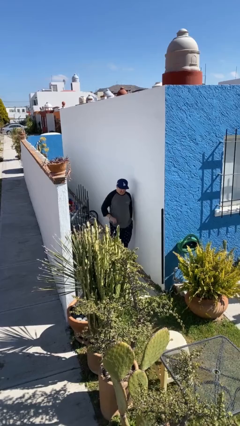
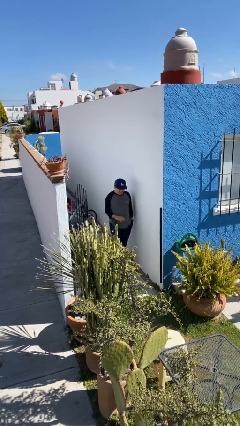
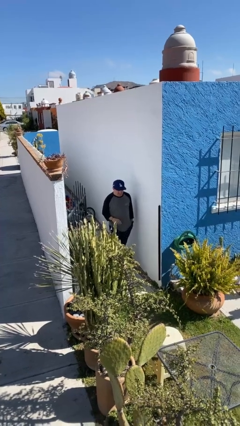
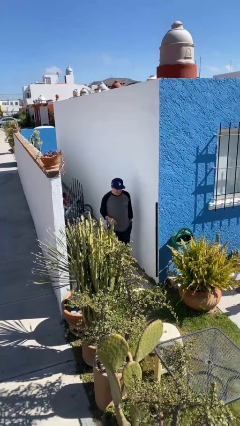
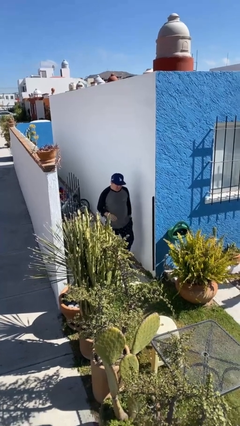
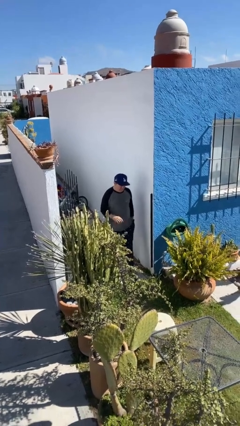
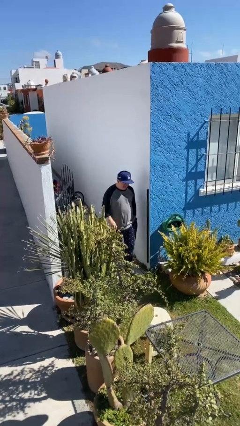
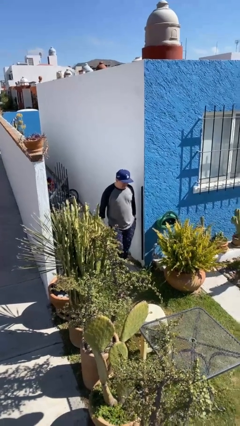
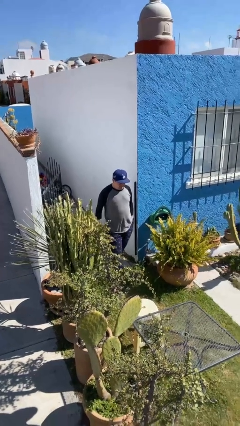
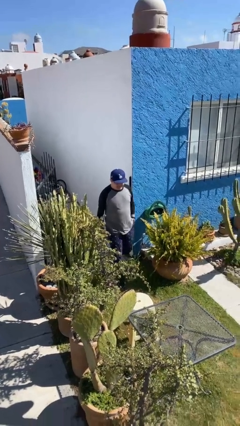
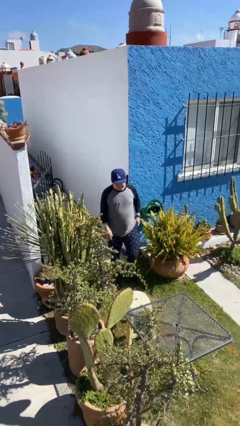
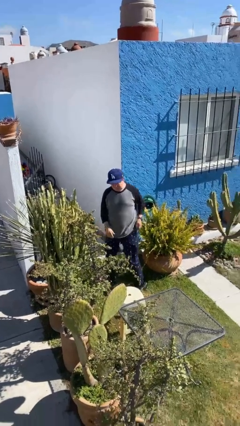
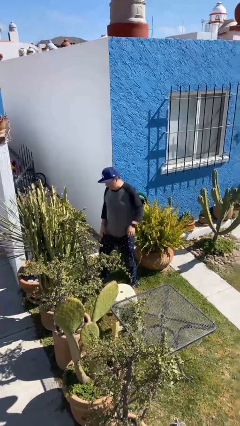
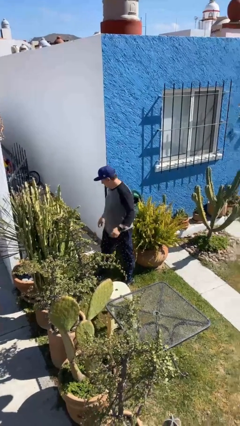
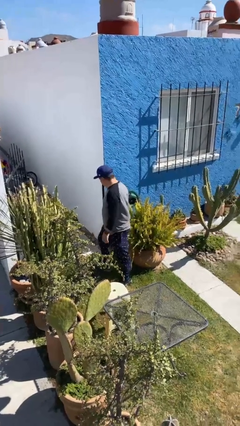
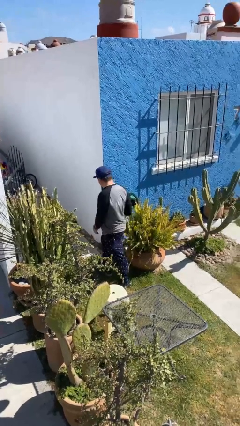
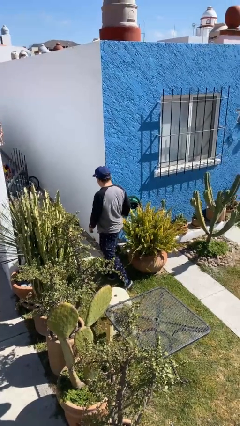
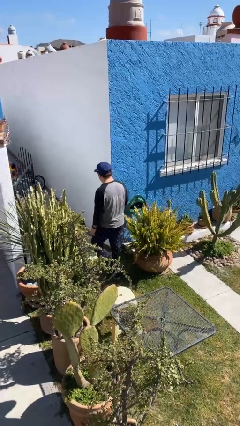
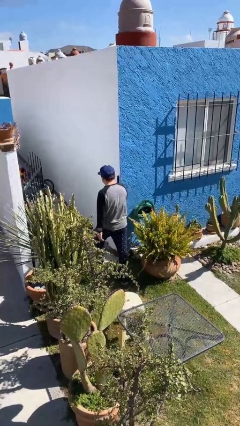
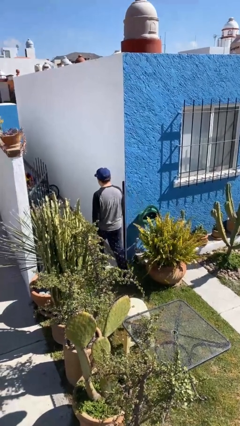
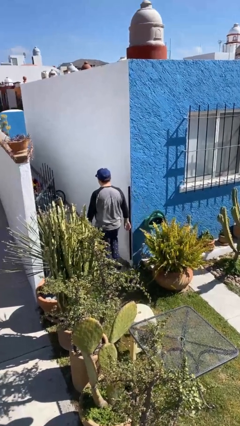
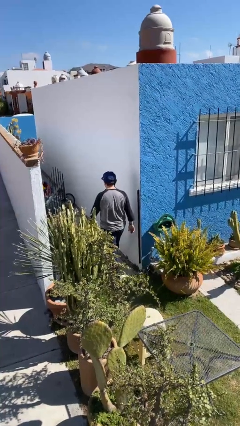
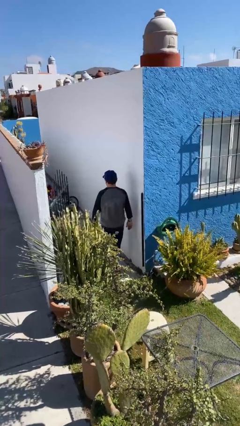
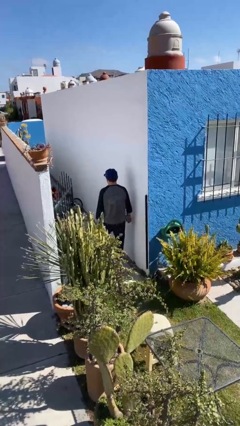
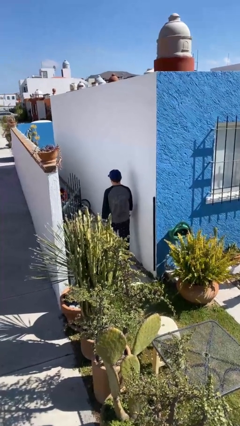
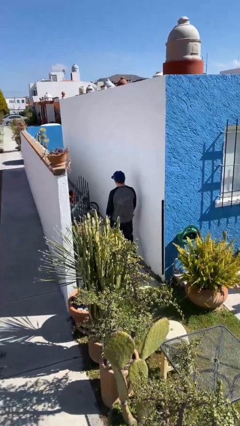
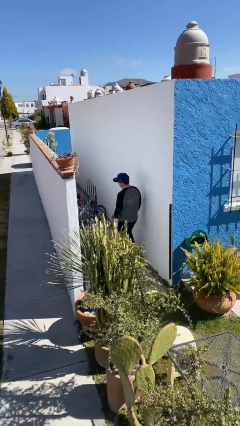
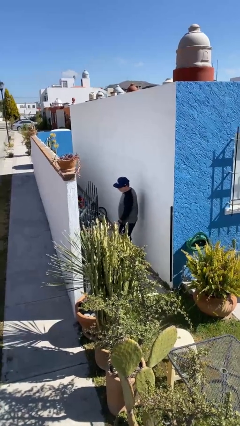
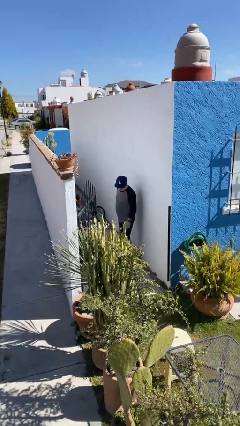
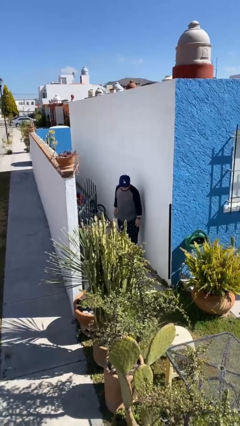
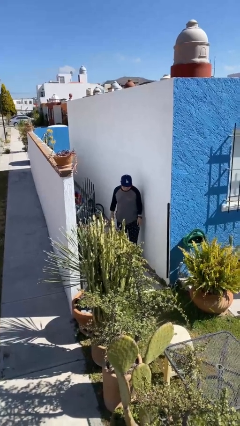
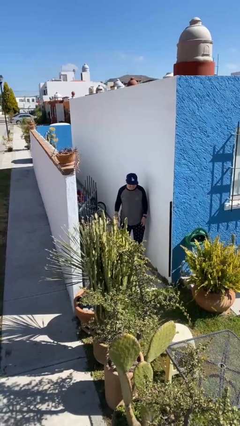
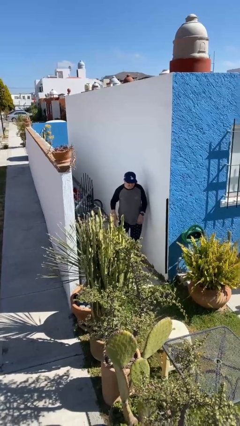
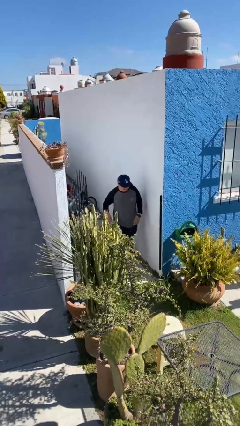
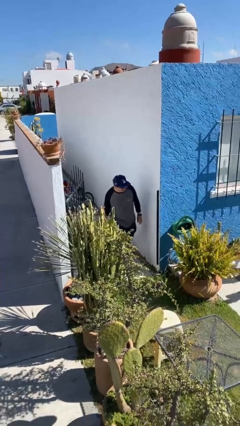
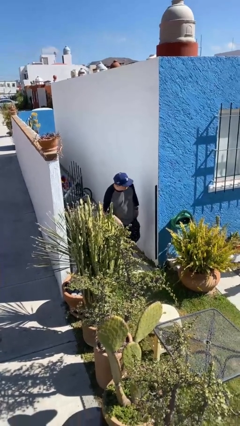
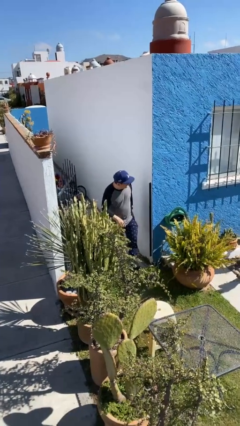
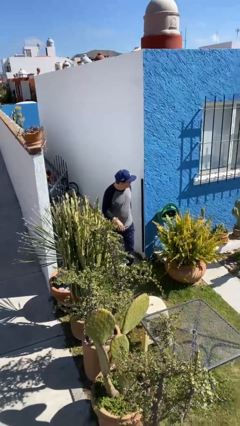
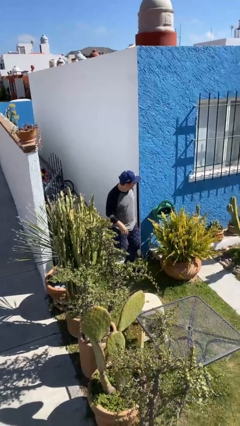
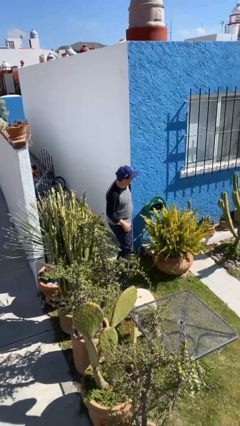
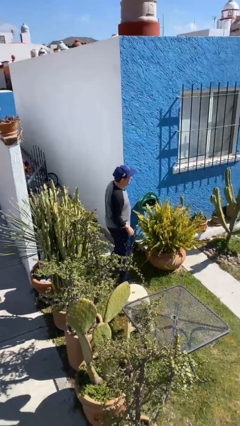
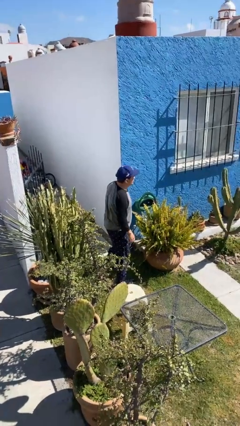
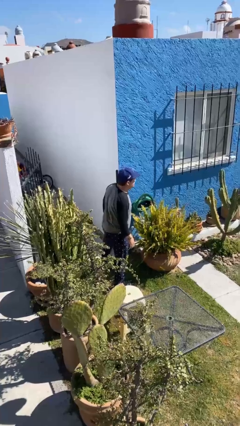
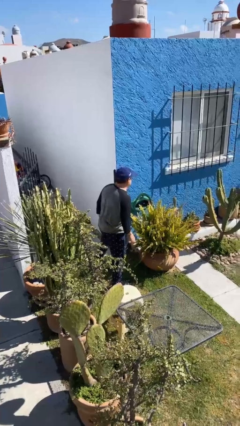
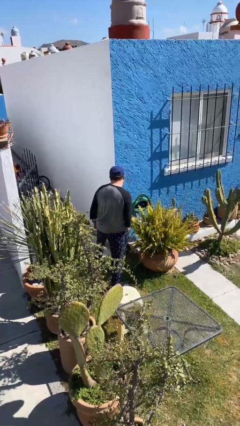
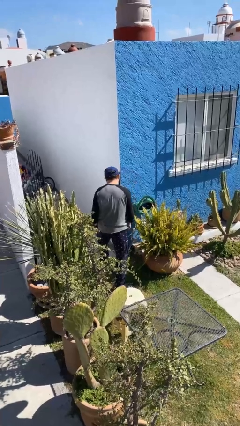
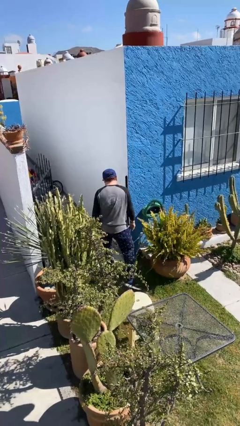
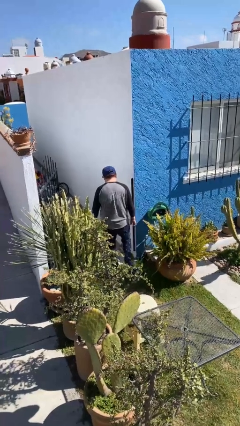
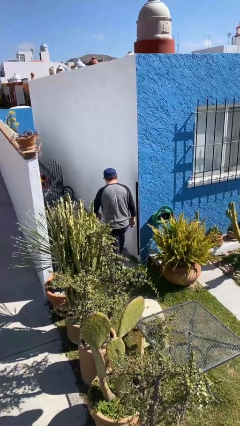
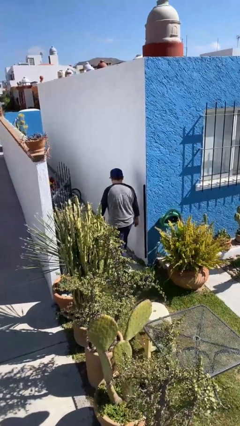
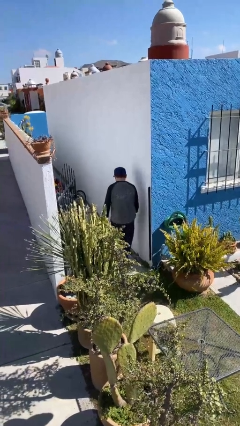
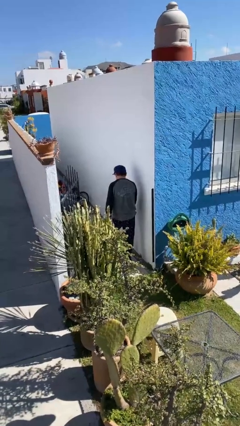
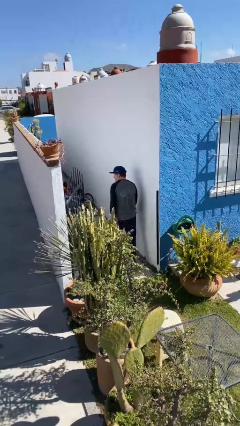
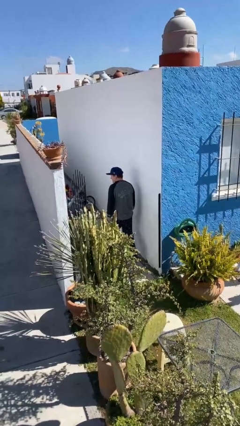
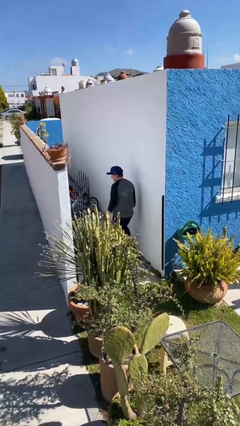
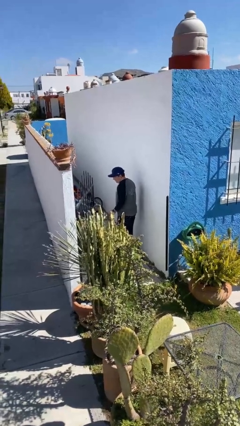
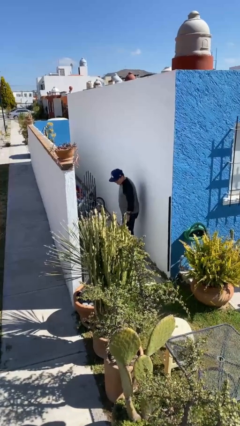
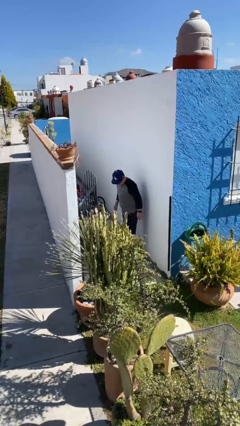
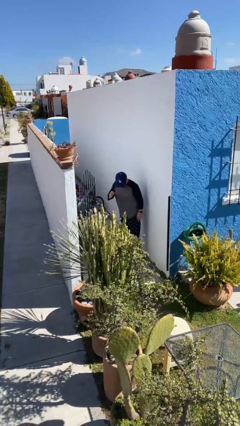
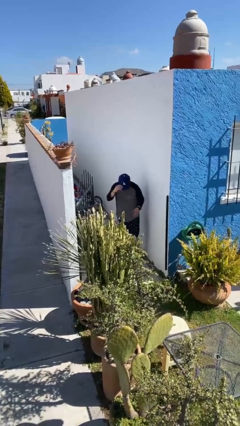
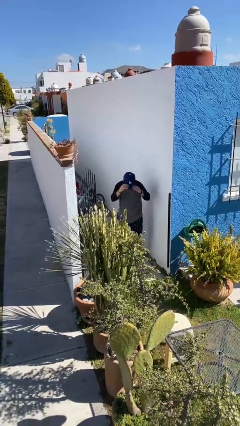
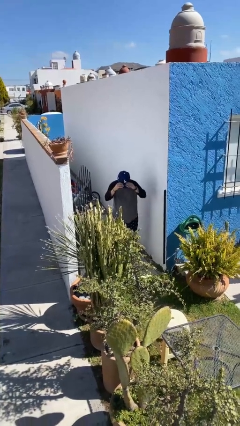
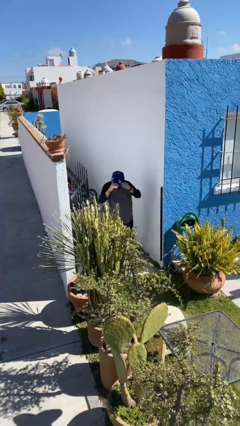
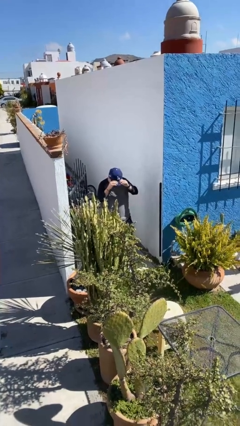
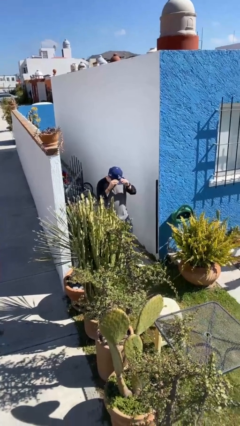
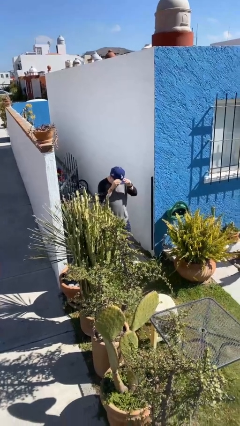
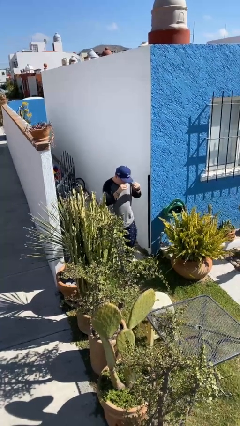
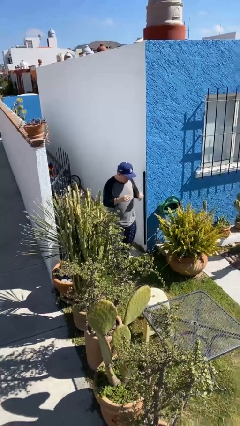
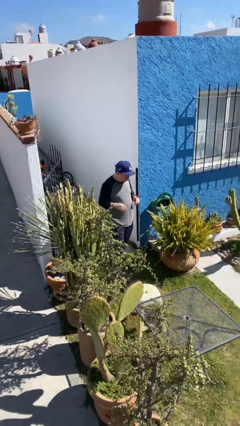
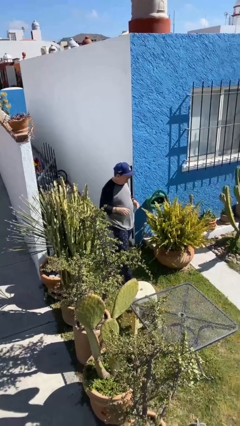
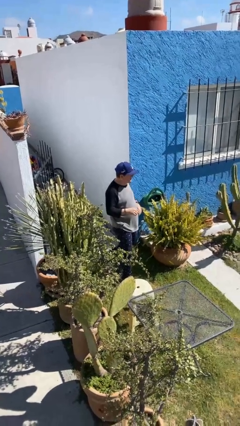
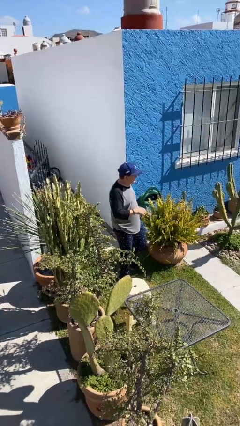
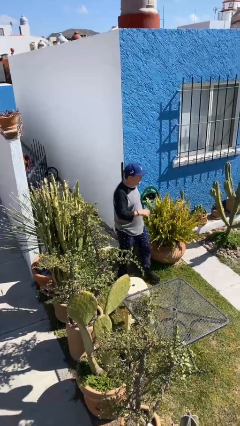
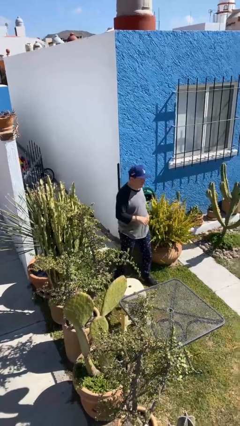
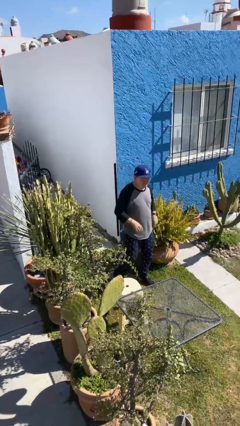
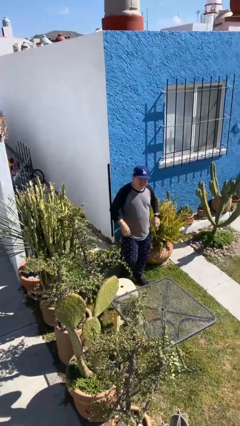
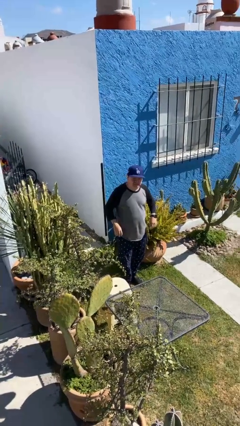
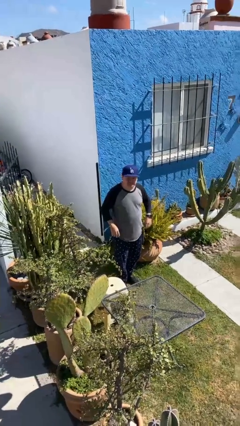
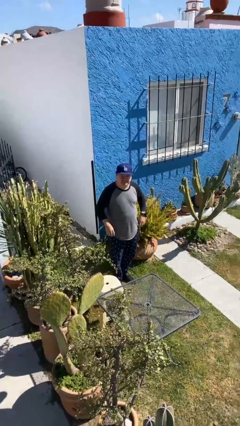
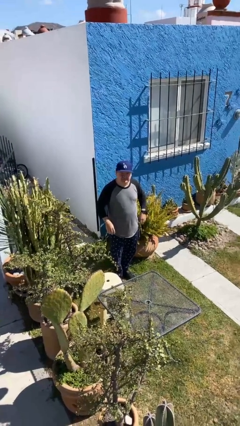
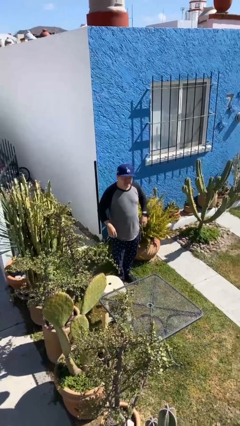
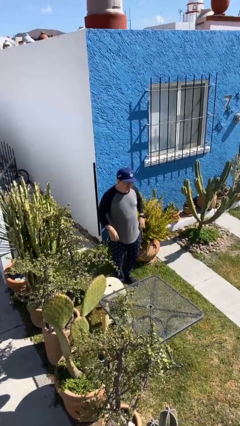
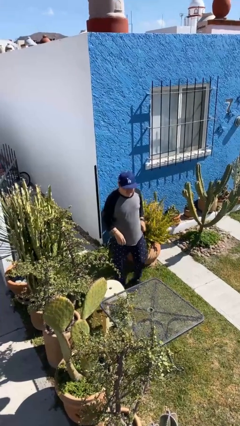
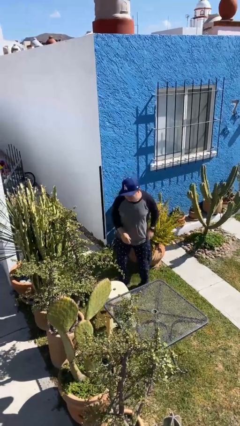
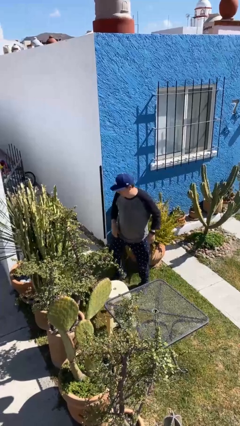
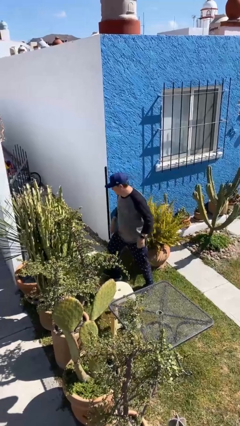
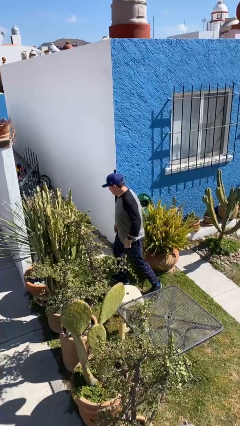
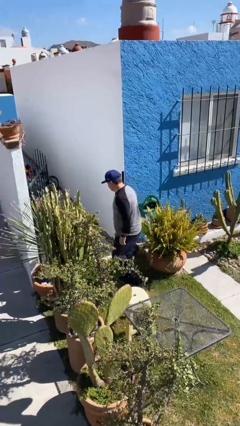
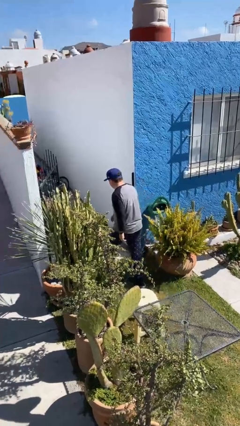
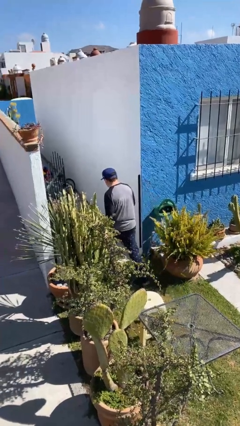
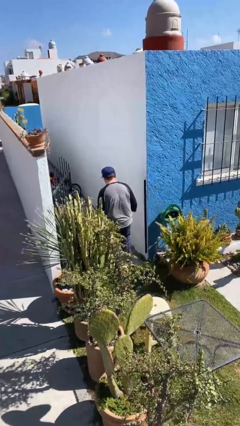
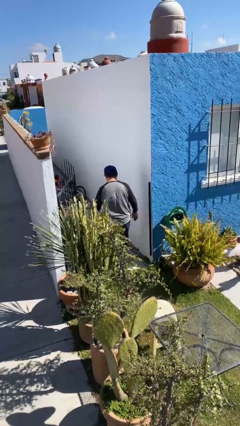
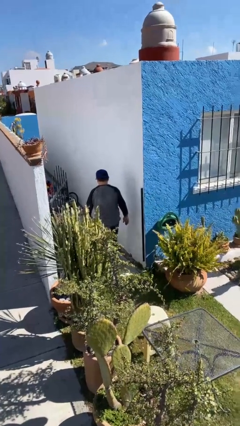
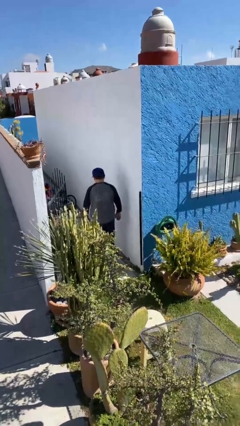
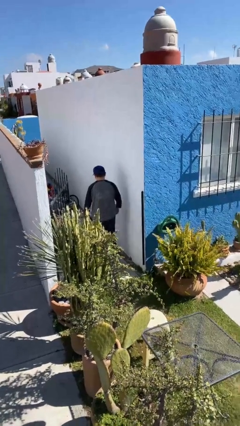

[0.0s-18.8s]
person texts on phone
